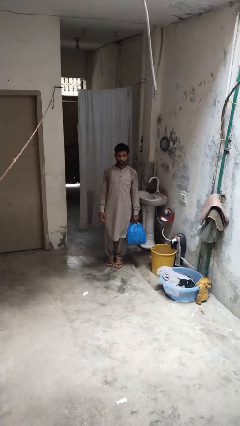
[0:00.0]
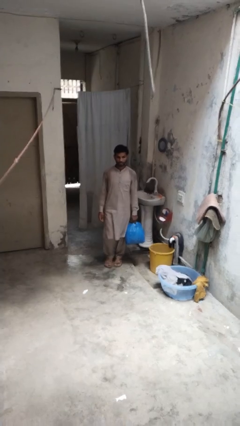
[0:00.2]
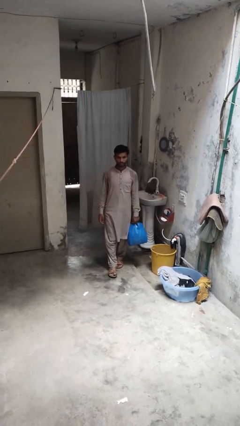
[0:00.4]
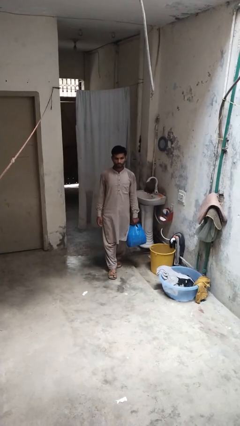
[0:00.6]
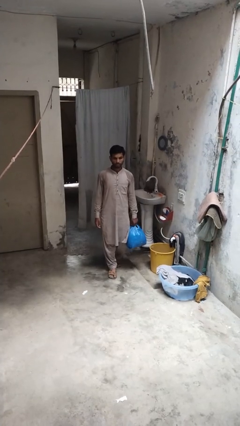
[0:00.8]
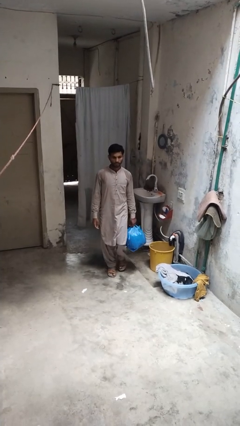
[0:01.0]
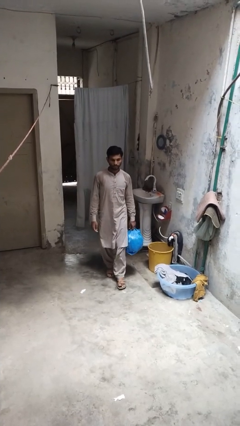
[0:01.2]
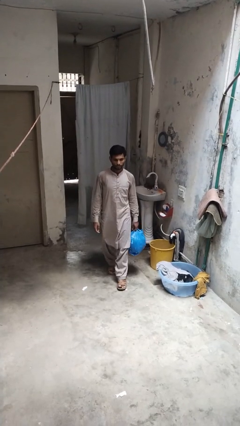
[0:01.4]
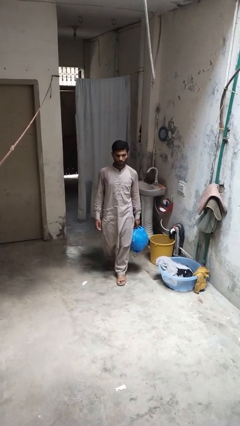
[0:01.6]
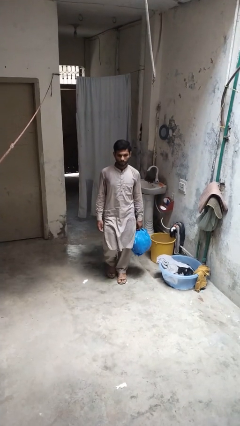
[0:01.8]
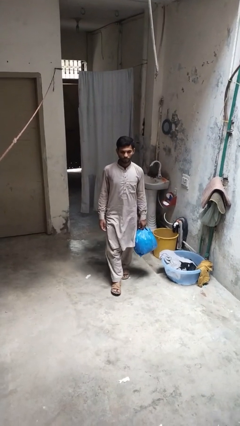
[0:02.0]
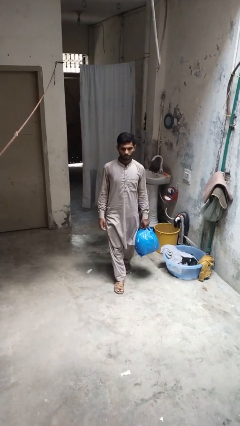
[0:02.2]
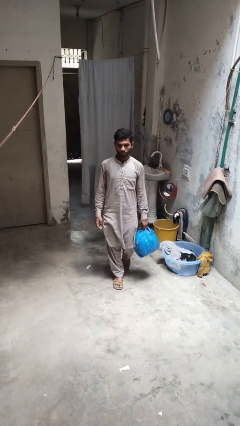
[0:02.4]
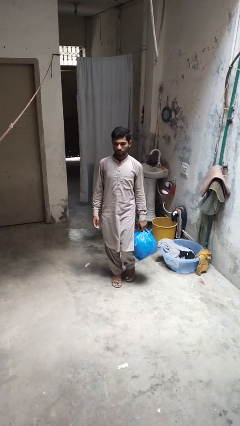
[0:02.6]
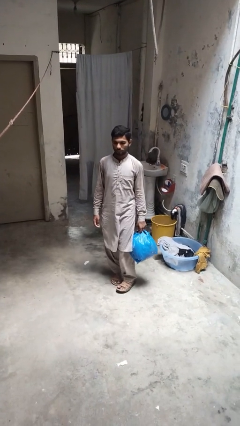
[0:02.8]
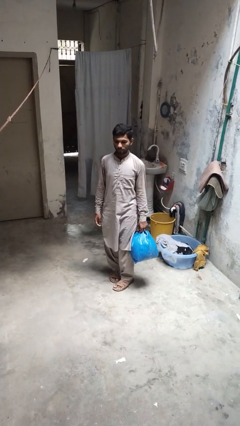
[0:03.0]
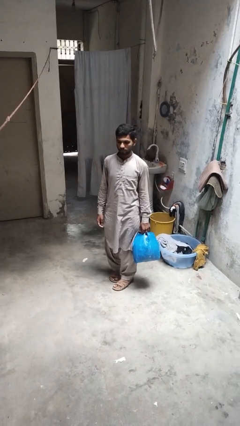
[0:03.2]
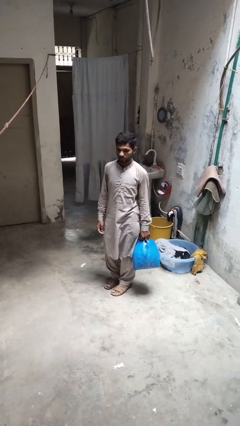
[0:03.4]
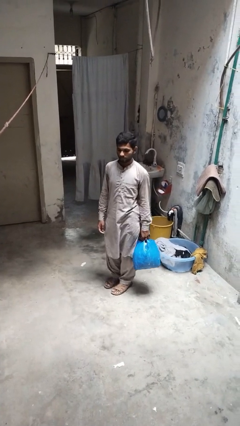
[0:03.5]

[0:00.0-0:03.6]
person carries groceries

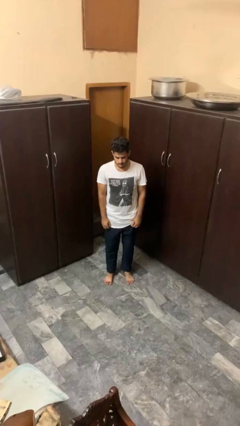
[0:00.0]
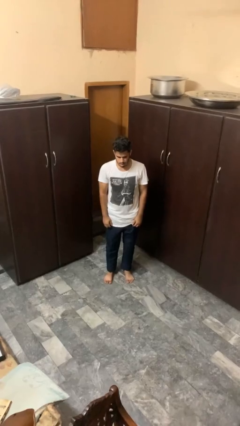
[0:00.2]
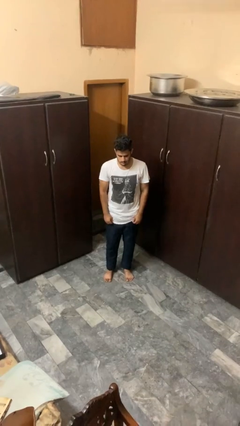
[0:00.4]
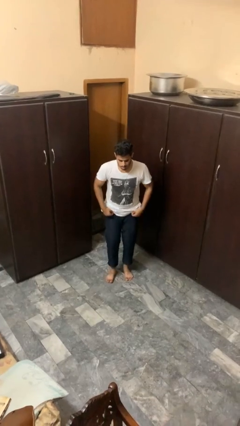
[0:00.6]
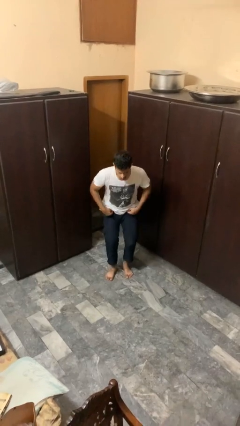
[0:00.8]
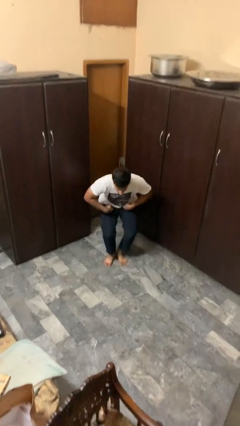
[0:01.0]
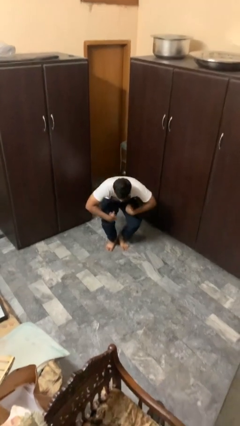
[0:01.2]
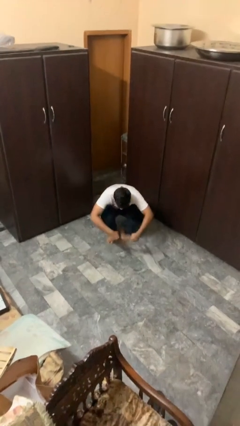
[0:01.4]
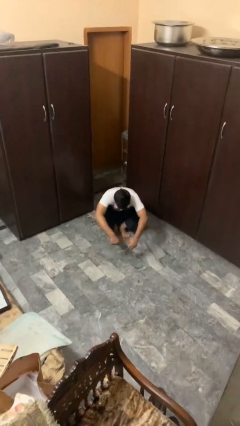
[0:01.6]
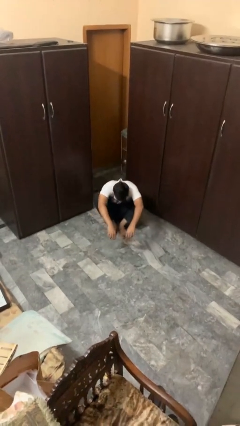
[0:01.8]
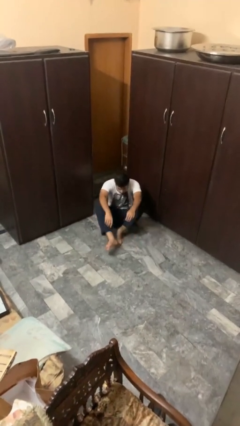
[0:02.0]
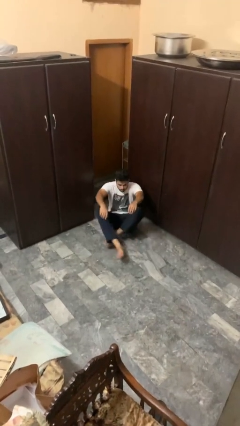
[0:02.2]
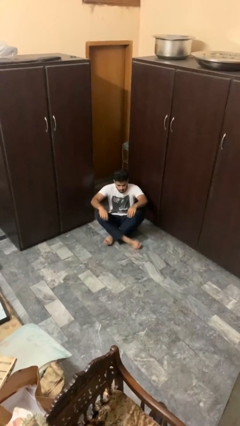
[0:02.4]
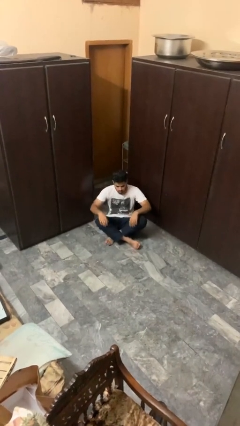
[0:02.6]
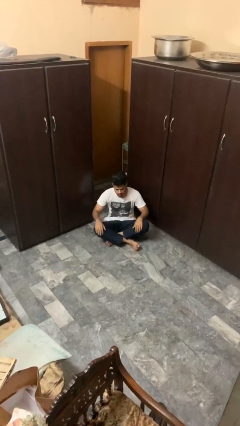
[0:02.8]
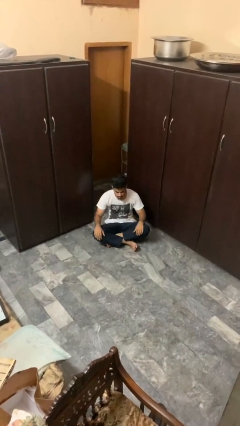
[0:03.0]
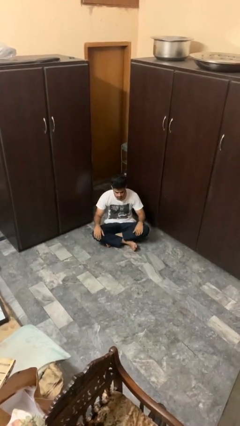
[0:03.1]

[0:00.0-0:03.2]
person sits crisscross

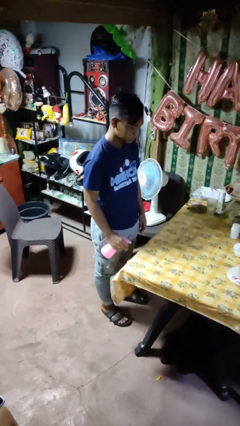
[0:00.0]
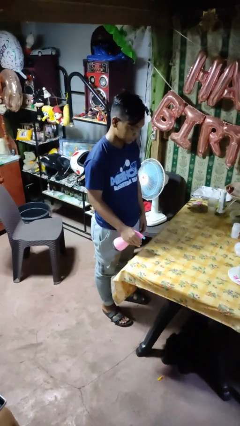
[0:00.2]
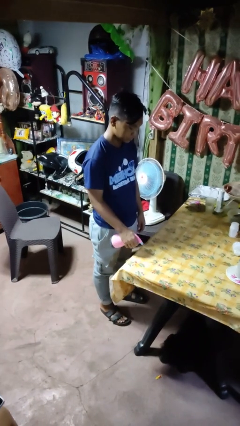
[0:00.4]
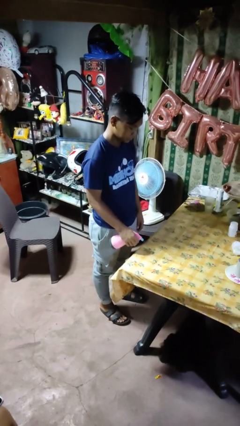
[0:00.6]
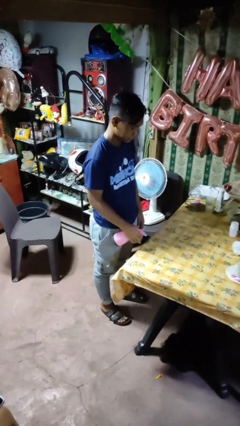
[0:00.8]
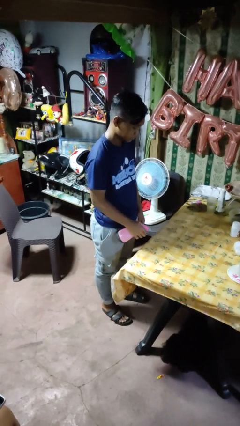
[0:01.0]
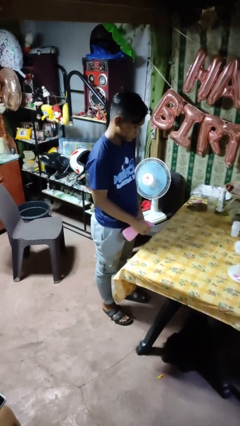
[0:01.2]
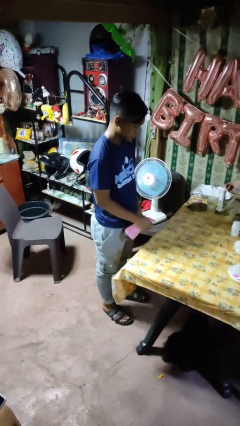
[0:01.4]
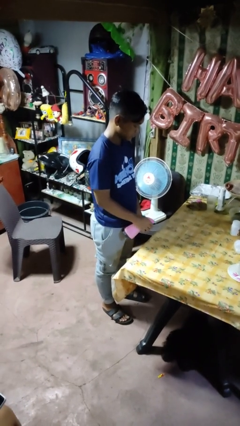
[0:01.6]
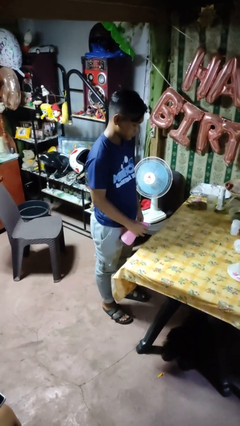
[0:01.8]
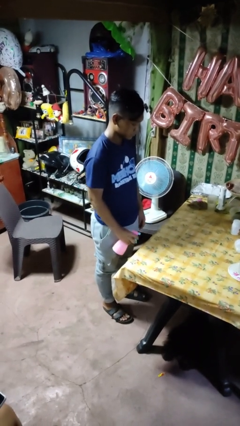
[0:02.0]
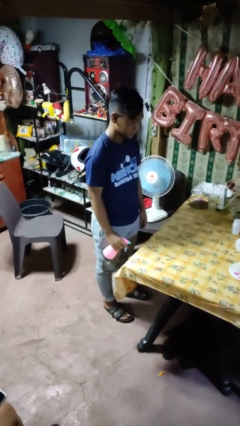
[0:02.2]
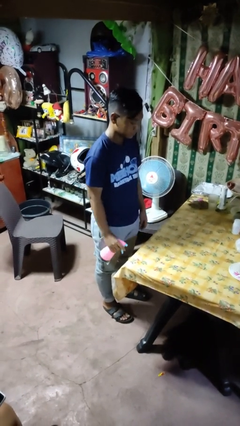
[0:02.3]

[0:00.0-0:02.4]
person sprays from bottle

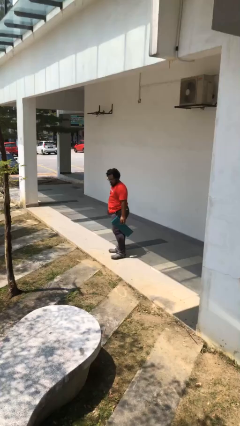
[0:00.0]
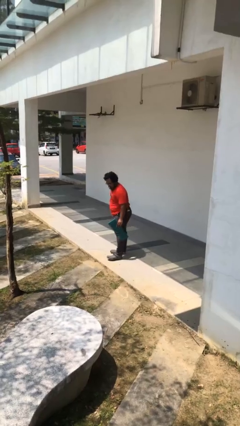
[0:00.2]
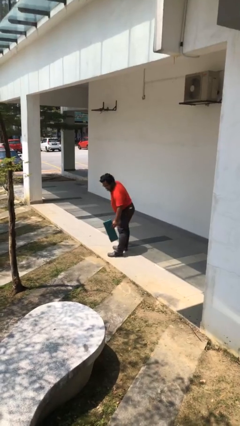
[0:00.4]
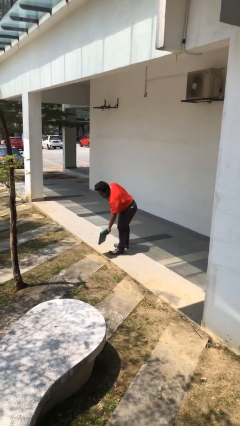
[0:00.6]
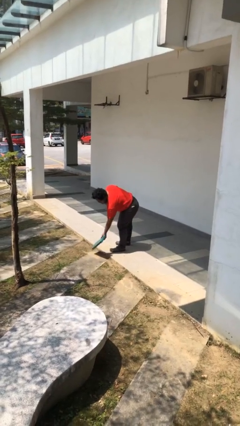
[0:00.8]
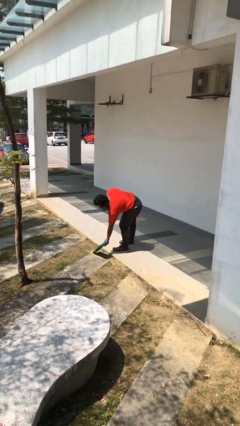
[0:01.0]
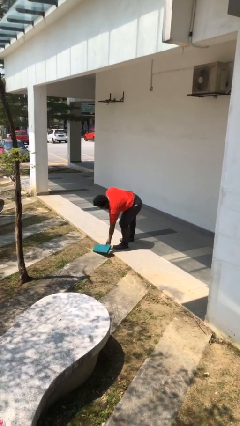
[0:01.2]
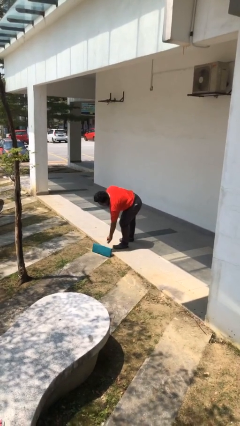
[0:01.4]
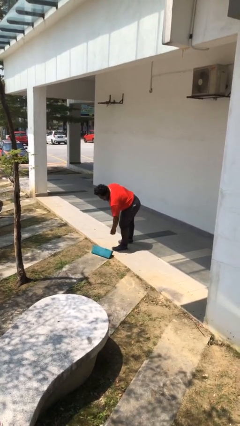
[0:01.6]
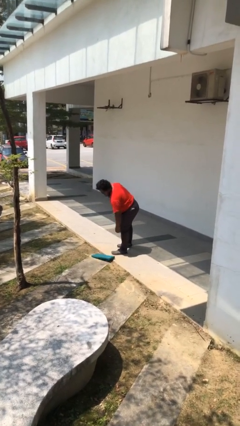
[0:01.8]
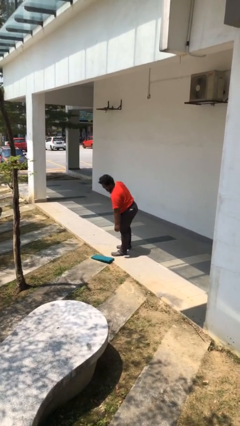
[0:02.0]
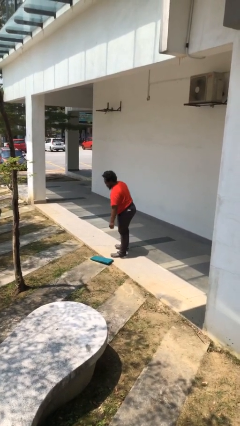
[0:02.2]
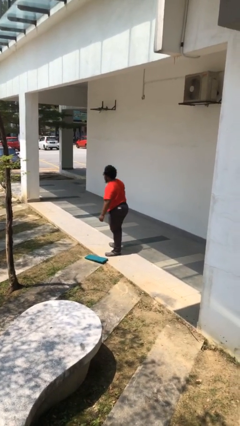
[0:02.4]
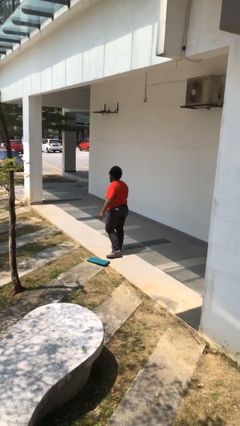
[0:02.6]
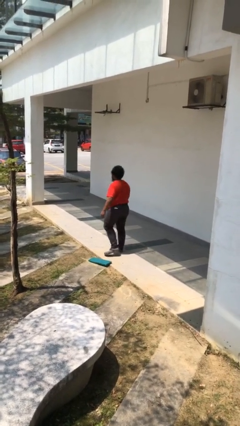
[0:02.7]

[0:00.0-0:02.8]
person puts down object on floor

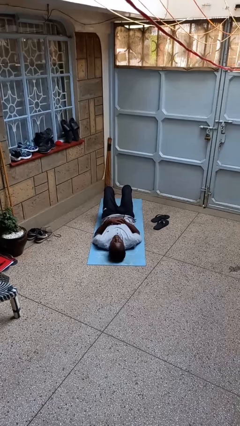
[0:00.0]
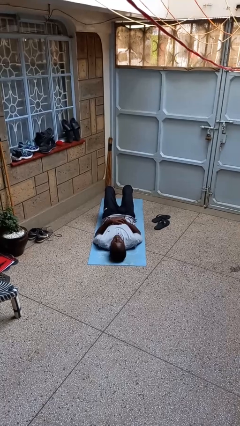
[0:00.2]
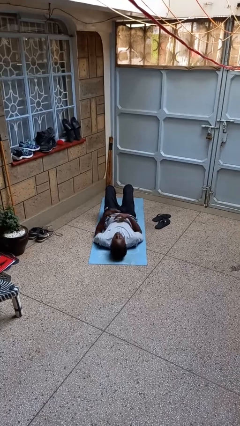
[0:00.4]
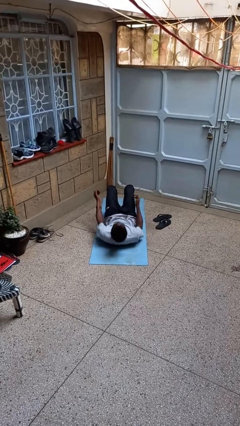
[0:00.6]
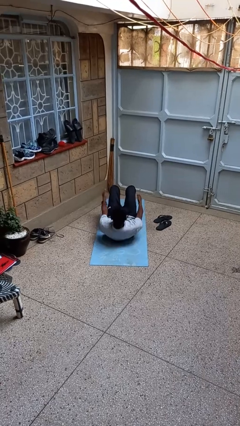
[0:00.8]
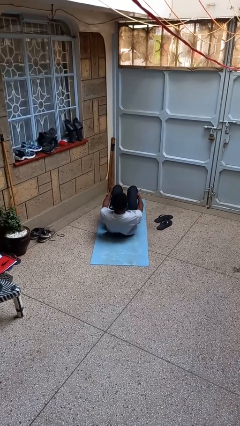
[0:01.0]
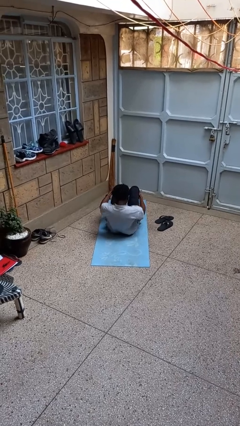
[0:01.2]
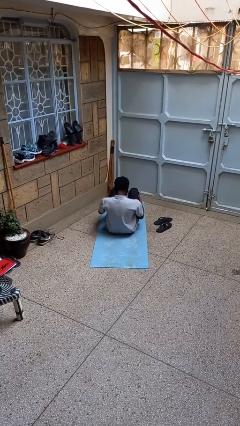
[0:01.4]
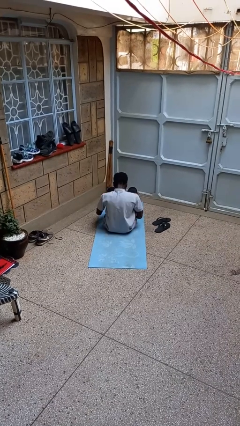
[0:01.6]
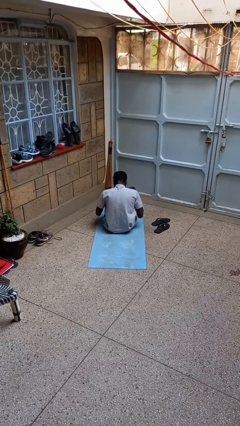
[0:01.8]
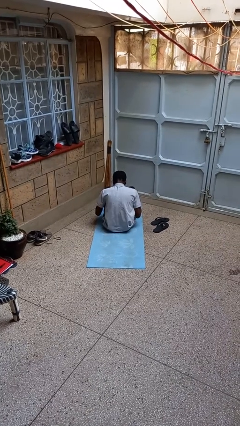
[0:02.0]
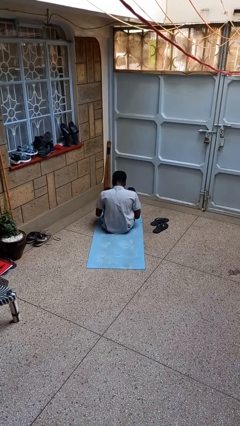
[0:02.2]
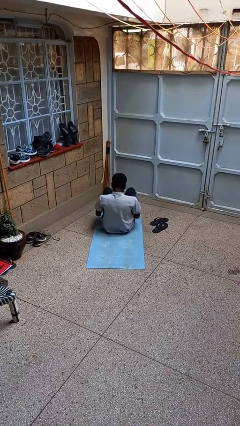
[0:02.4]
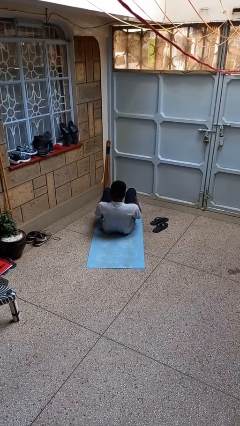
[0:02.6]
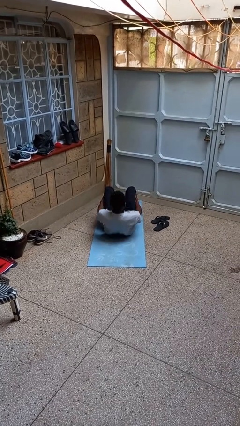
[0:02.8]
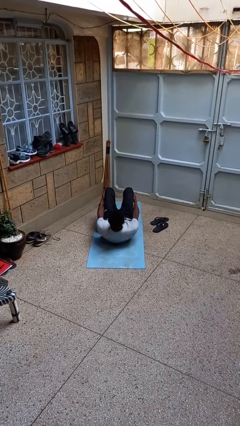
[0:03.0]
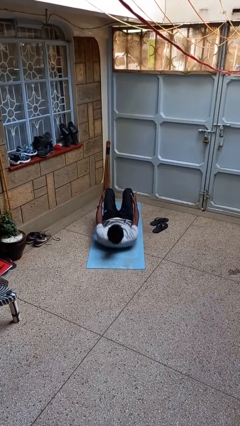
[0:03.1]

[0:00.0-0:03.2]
person exercises with pushup

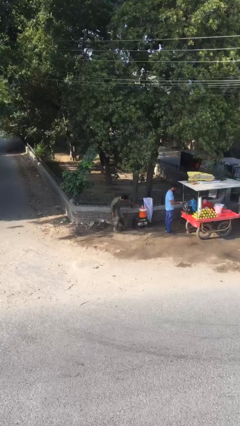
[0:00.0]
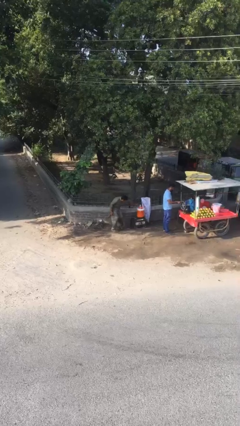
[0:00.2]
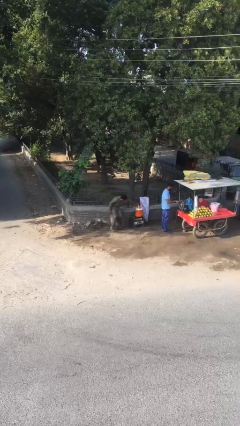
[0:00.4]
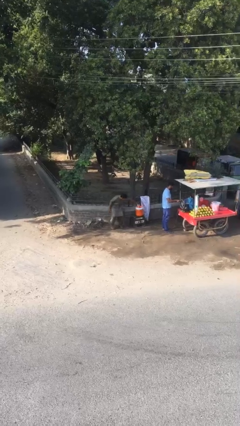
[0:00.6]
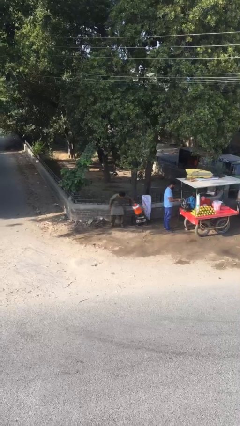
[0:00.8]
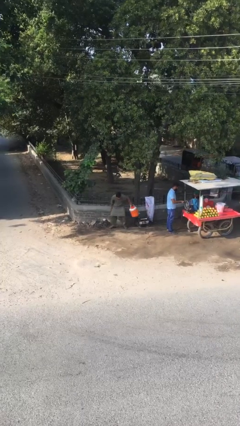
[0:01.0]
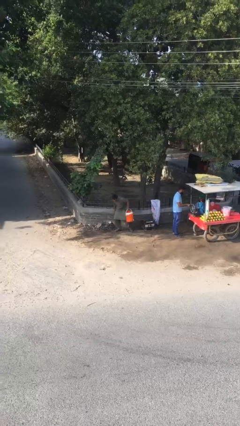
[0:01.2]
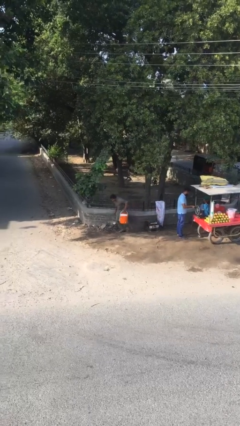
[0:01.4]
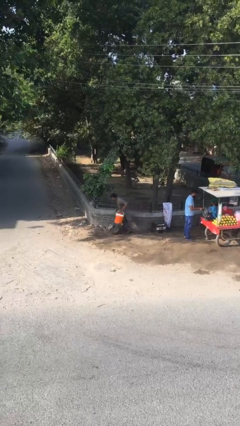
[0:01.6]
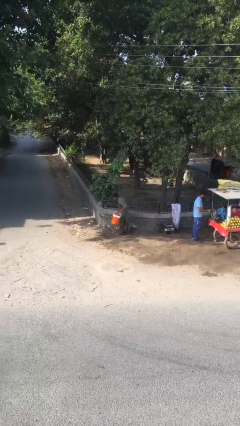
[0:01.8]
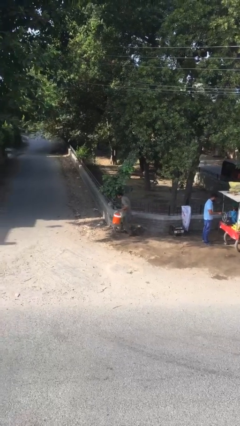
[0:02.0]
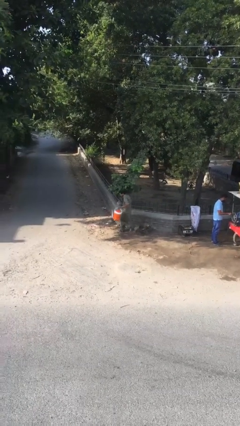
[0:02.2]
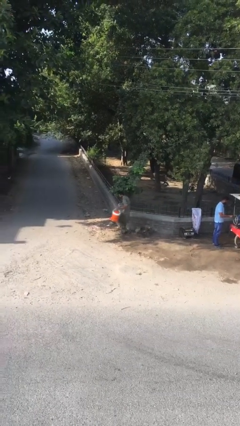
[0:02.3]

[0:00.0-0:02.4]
person steals object from person

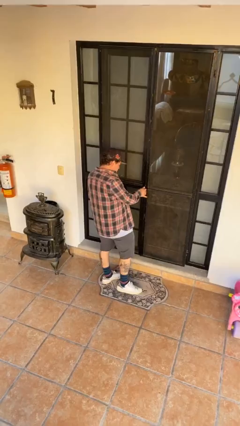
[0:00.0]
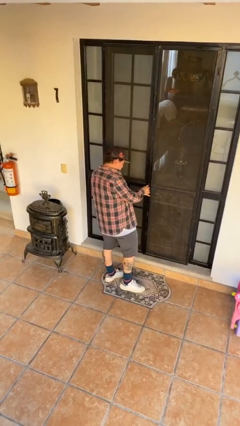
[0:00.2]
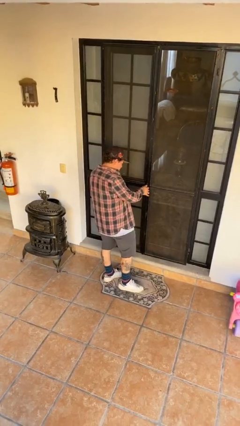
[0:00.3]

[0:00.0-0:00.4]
person closes facility door
